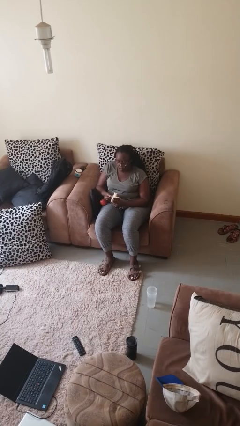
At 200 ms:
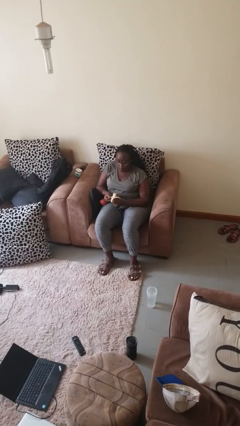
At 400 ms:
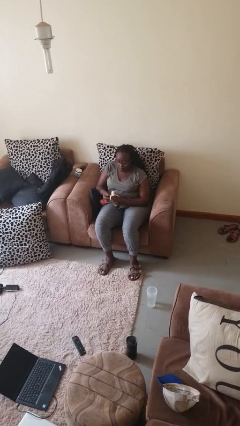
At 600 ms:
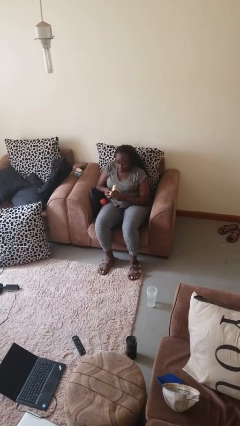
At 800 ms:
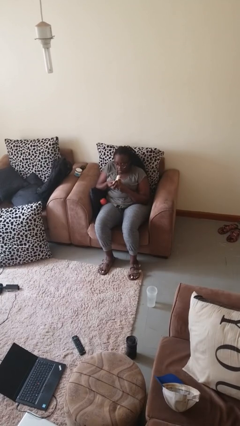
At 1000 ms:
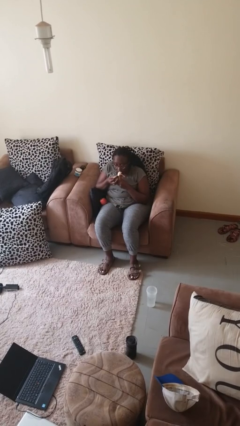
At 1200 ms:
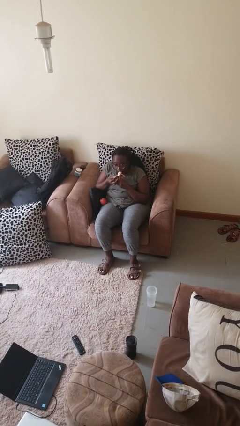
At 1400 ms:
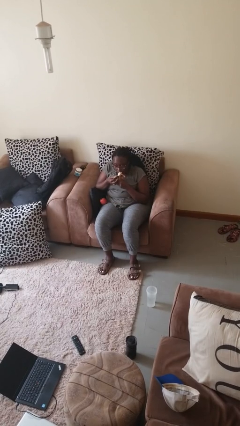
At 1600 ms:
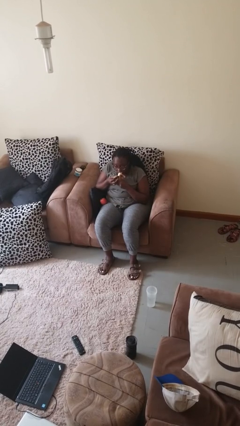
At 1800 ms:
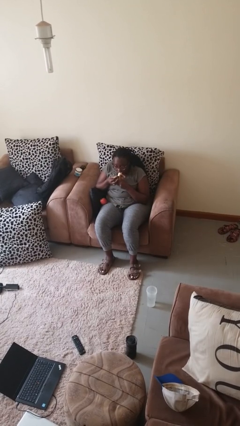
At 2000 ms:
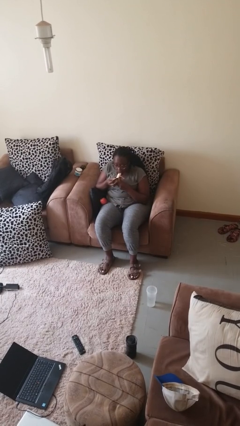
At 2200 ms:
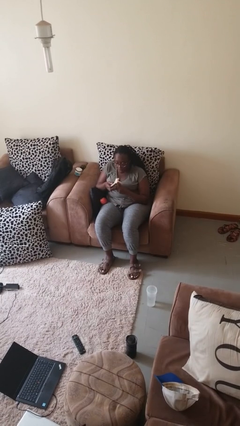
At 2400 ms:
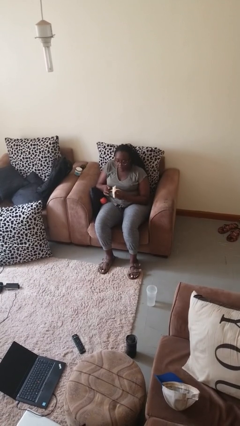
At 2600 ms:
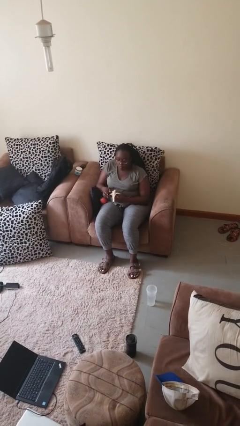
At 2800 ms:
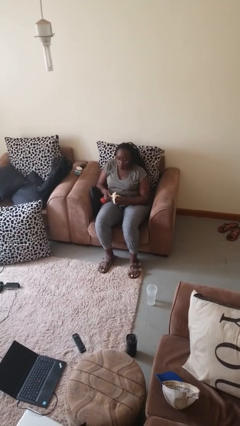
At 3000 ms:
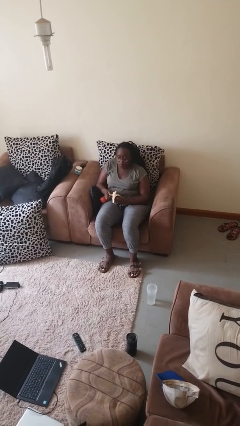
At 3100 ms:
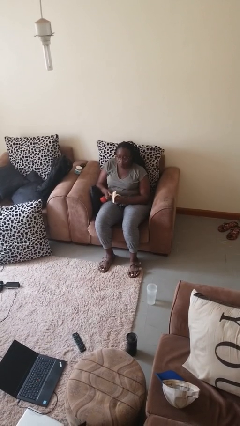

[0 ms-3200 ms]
person eats banana

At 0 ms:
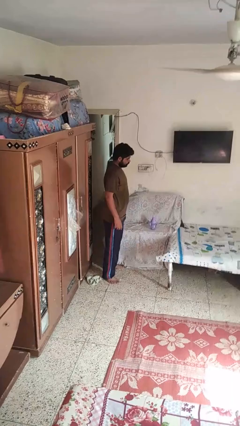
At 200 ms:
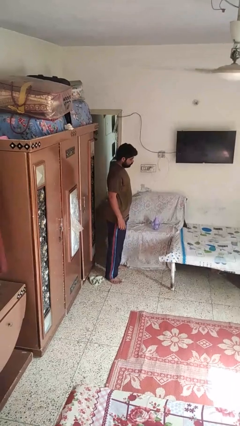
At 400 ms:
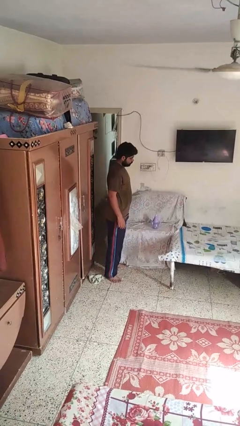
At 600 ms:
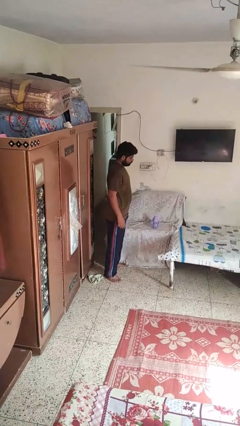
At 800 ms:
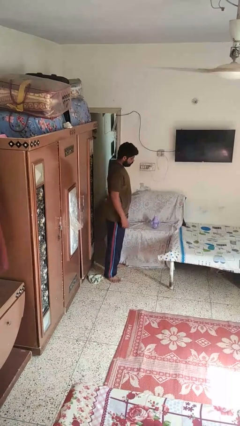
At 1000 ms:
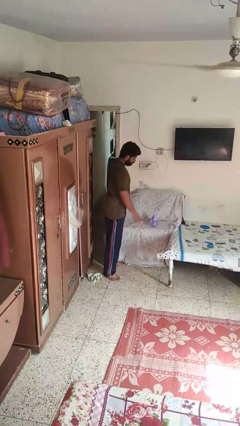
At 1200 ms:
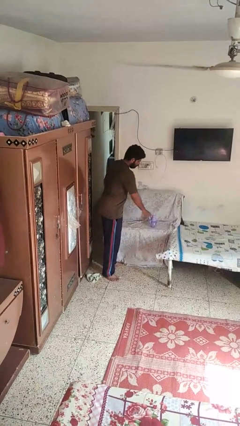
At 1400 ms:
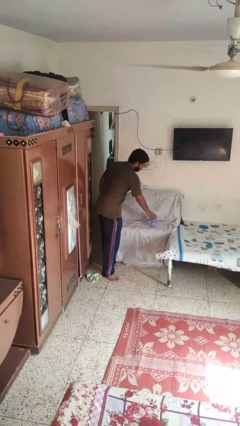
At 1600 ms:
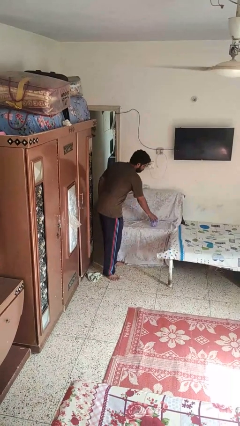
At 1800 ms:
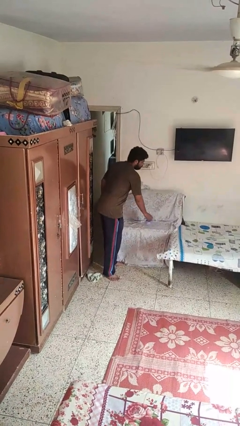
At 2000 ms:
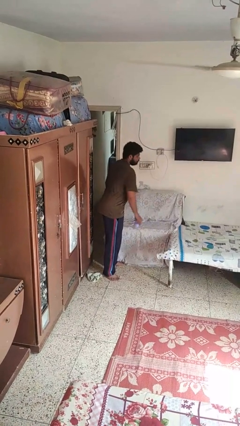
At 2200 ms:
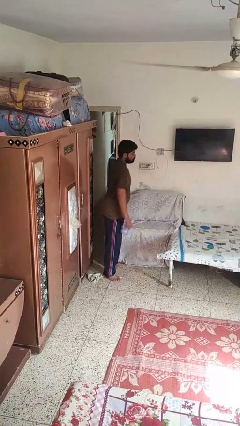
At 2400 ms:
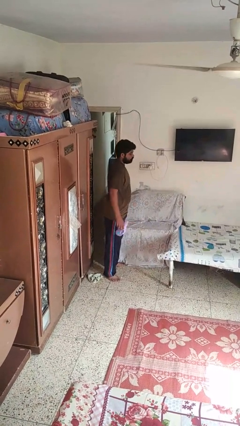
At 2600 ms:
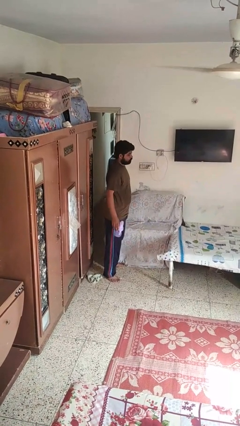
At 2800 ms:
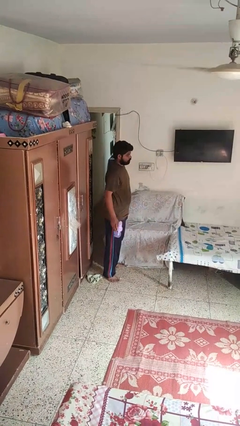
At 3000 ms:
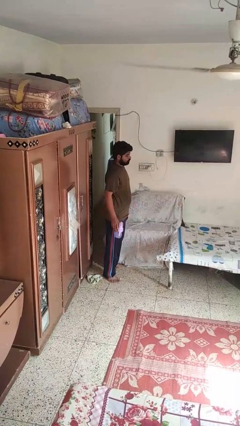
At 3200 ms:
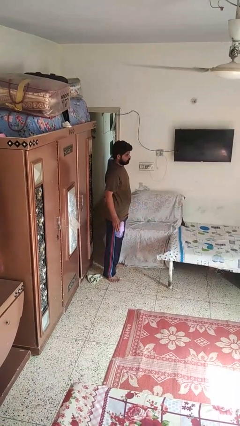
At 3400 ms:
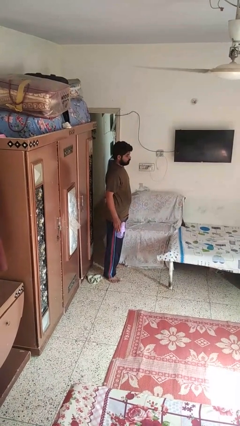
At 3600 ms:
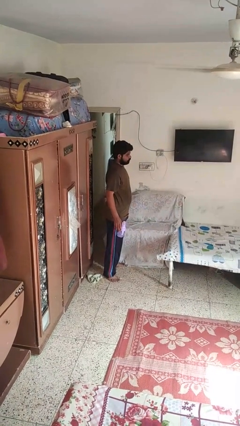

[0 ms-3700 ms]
person picks up object from couch

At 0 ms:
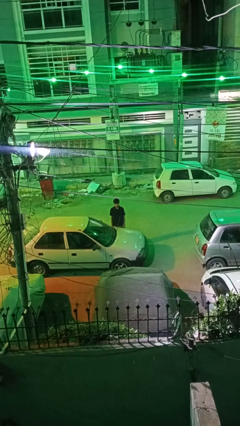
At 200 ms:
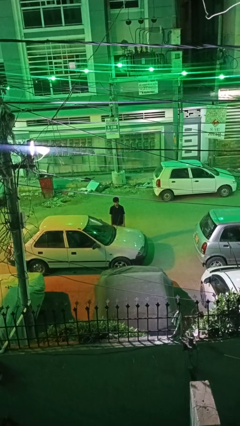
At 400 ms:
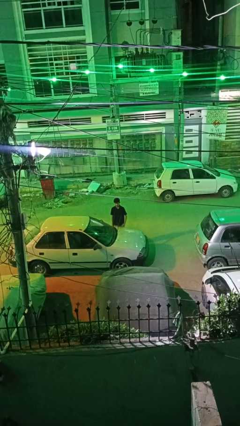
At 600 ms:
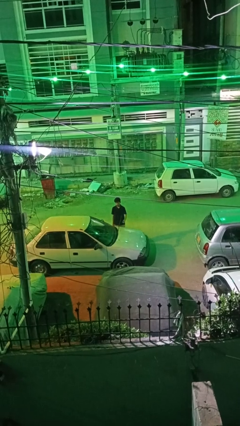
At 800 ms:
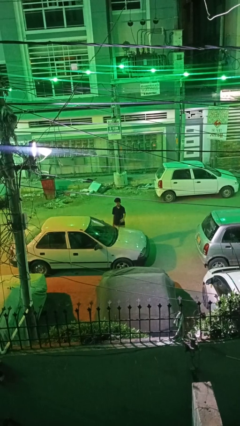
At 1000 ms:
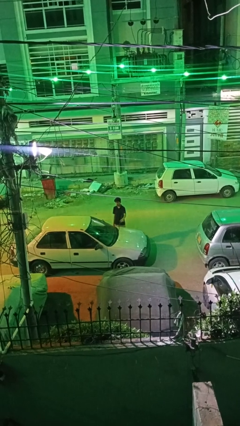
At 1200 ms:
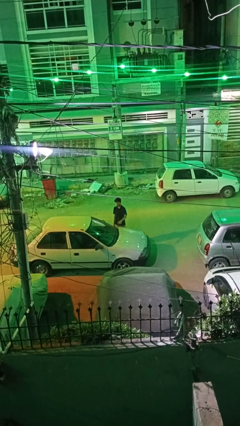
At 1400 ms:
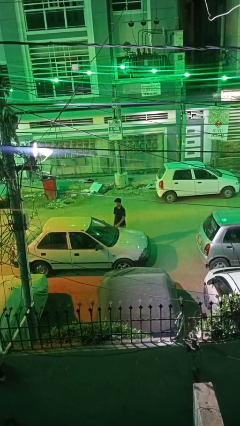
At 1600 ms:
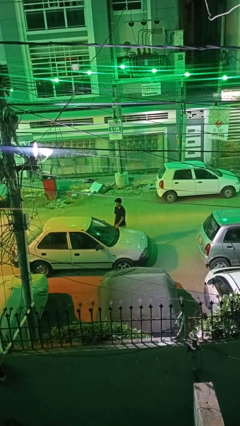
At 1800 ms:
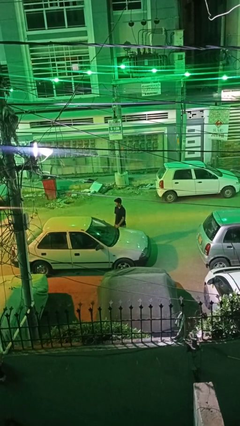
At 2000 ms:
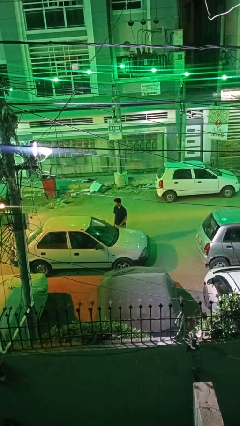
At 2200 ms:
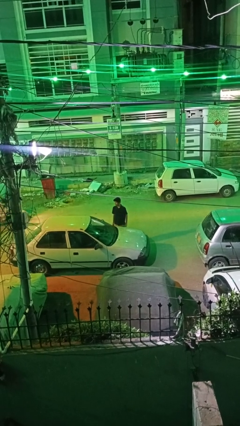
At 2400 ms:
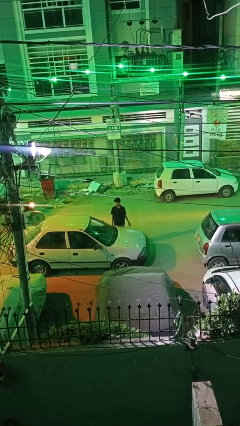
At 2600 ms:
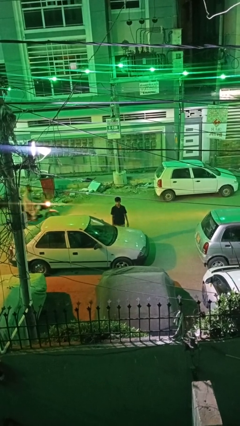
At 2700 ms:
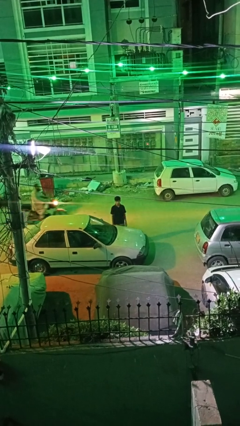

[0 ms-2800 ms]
person flips down car wipers

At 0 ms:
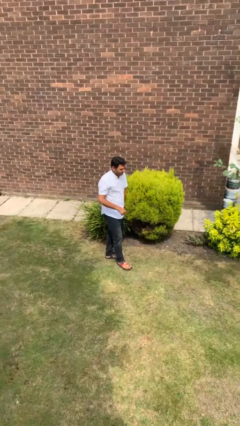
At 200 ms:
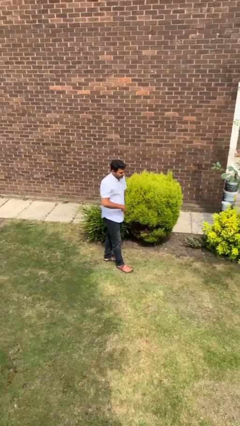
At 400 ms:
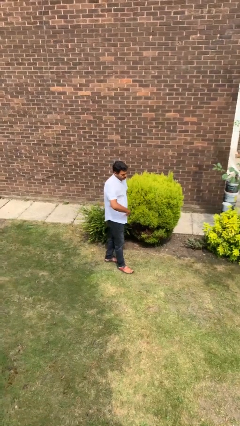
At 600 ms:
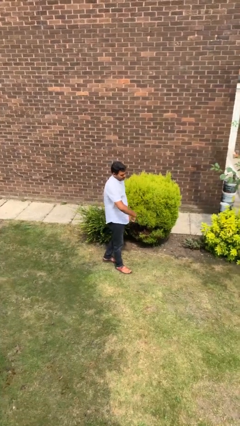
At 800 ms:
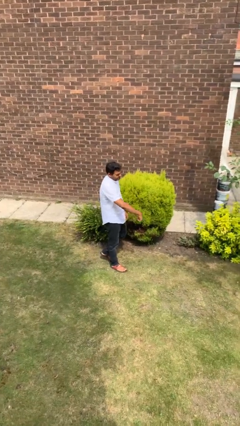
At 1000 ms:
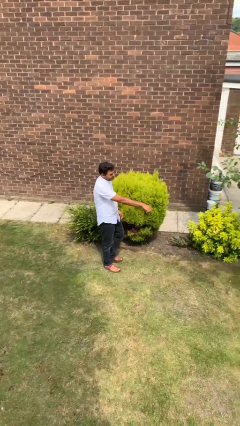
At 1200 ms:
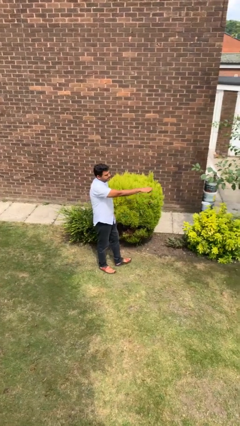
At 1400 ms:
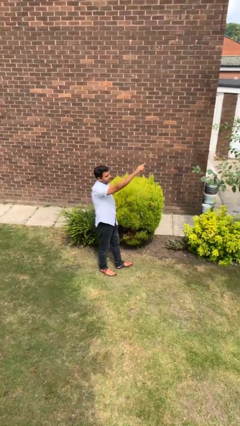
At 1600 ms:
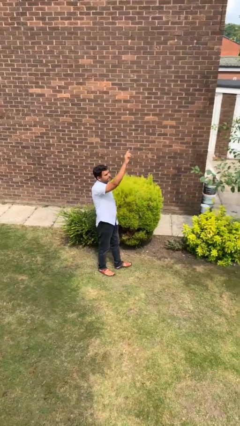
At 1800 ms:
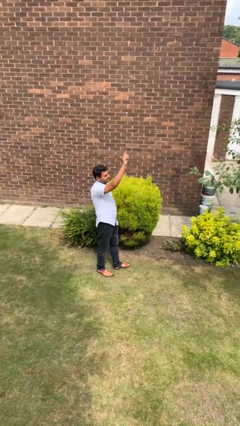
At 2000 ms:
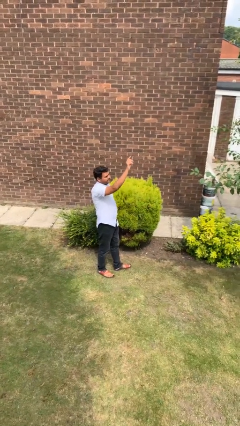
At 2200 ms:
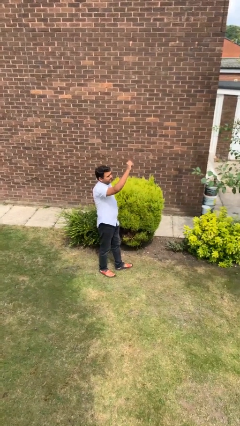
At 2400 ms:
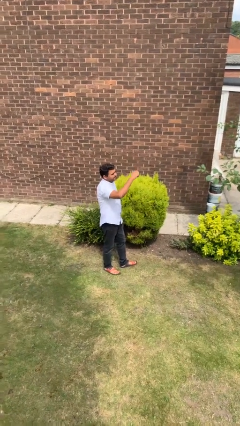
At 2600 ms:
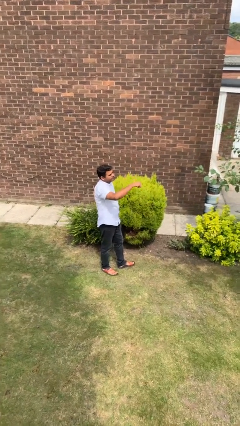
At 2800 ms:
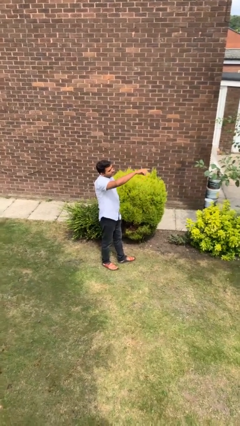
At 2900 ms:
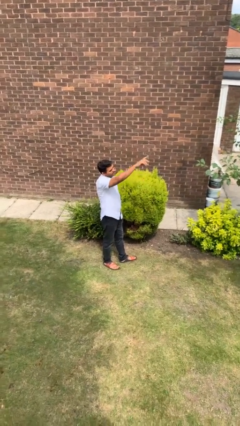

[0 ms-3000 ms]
person gestures swipe up

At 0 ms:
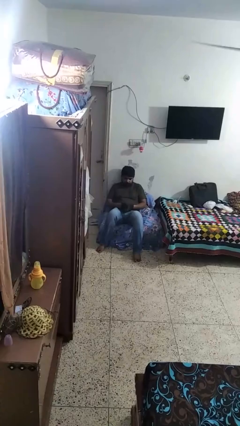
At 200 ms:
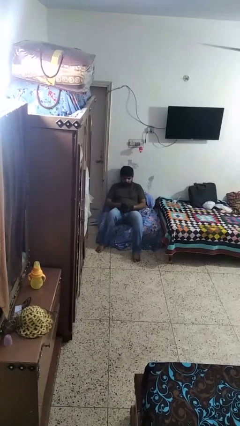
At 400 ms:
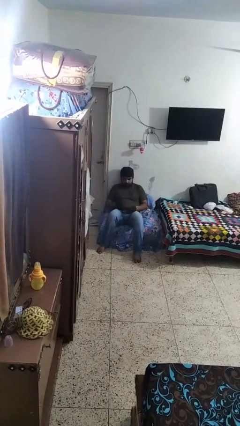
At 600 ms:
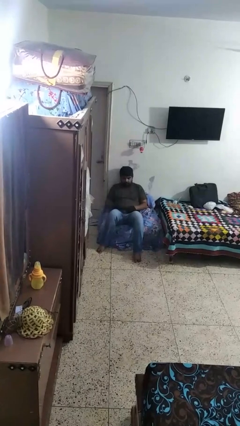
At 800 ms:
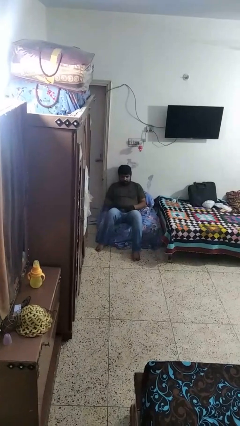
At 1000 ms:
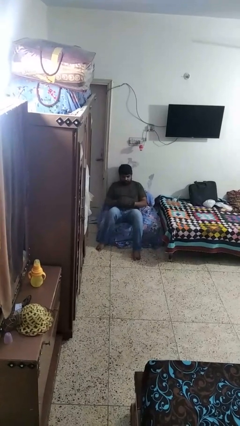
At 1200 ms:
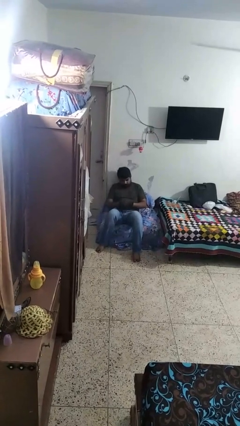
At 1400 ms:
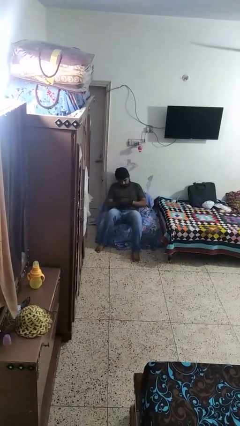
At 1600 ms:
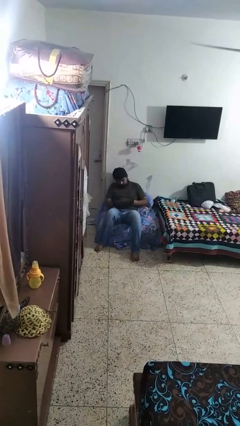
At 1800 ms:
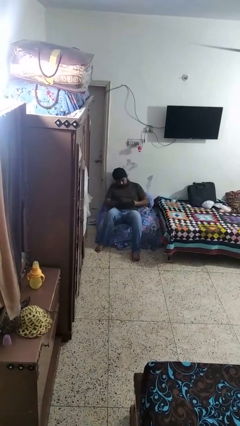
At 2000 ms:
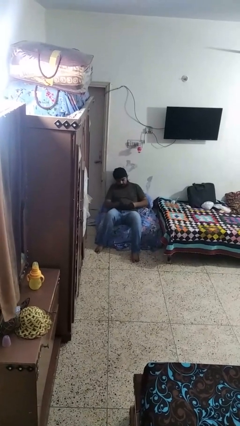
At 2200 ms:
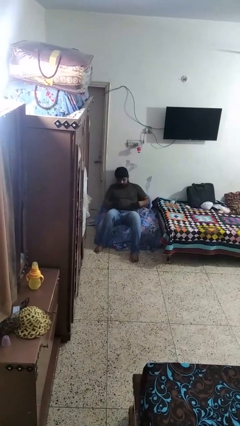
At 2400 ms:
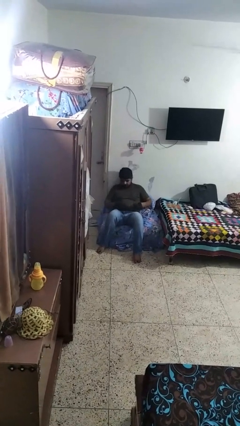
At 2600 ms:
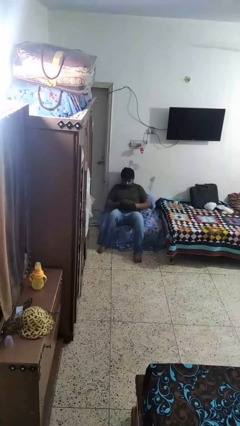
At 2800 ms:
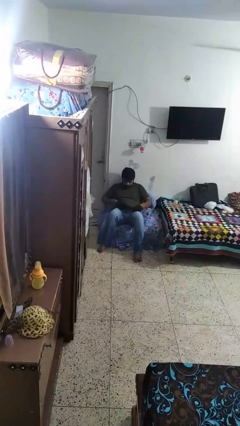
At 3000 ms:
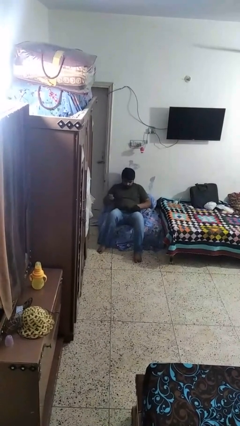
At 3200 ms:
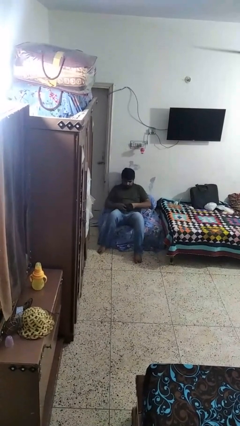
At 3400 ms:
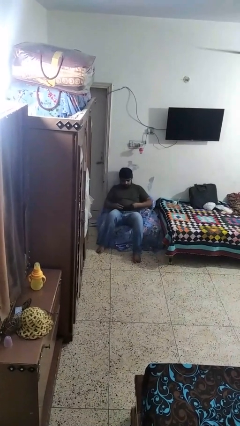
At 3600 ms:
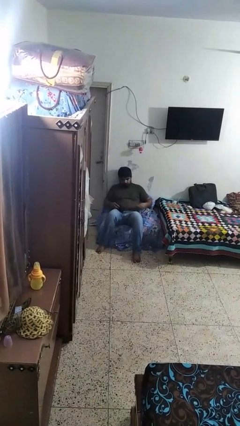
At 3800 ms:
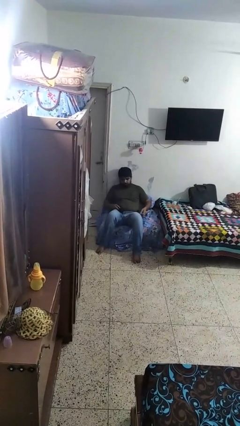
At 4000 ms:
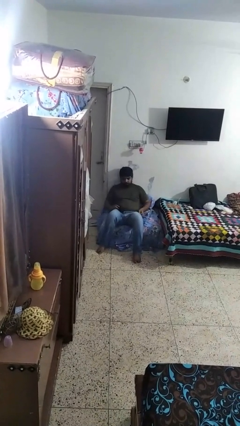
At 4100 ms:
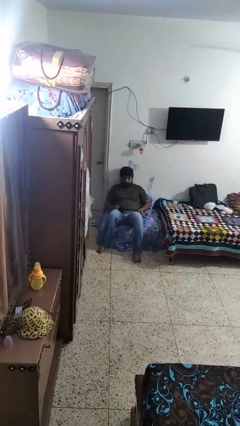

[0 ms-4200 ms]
person takes off gloves

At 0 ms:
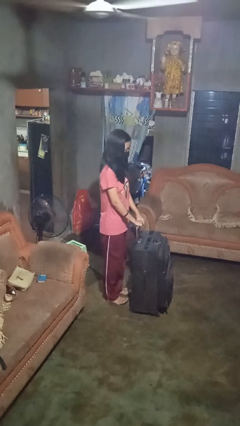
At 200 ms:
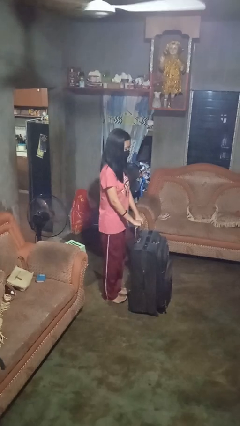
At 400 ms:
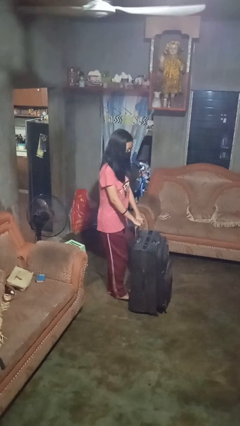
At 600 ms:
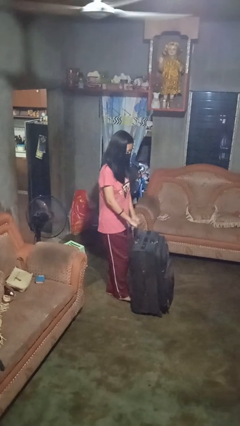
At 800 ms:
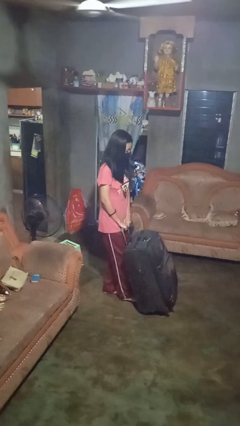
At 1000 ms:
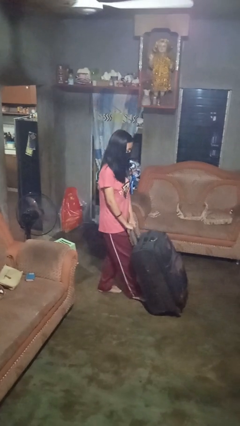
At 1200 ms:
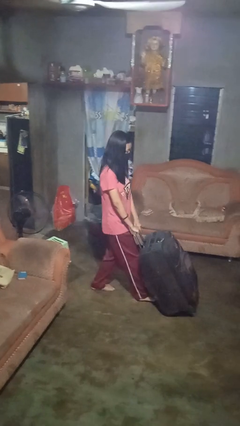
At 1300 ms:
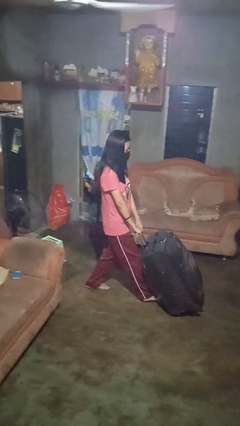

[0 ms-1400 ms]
person pushes wheeled cart
